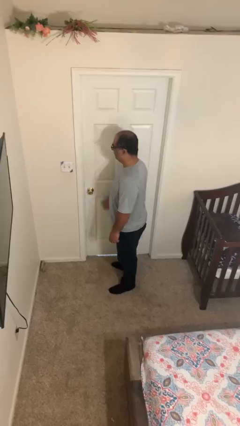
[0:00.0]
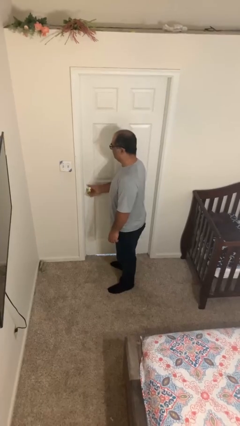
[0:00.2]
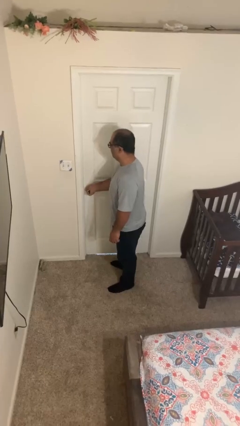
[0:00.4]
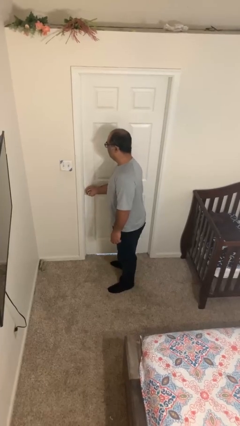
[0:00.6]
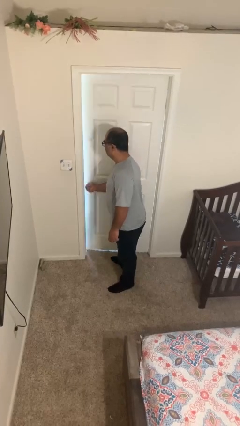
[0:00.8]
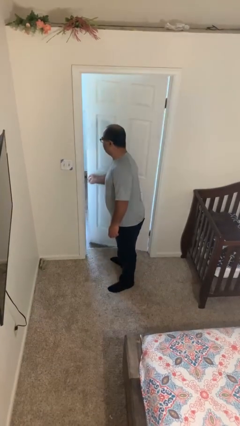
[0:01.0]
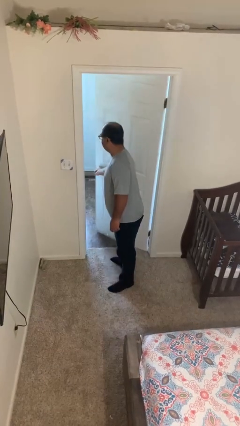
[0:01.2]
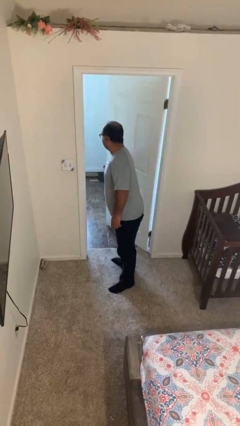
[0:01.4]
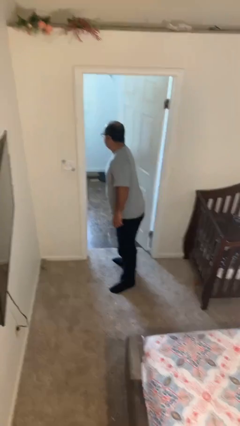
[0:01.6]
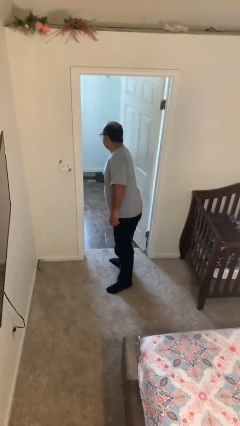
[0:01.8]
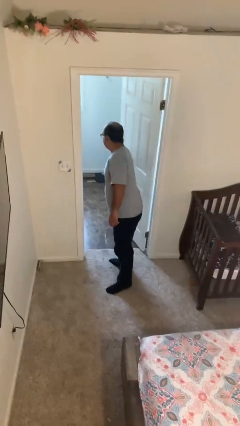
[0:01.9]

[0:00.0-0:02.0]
person opens facility door

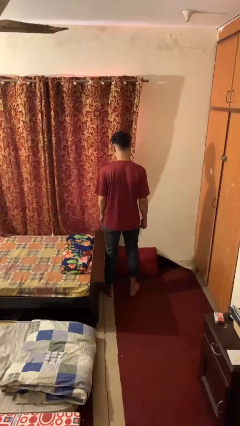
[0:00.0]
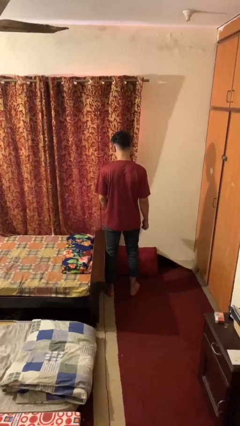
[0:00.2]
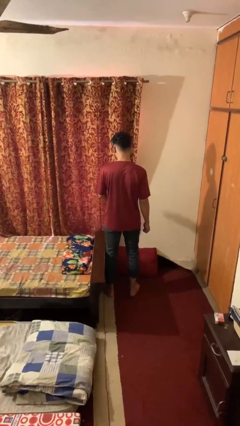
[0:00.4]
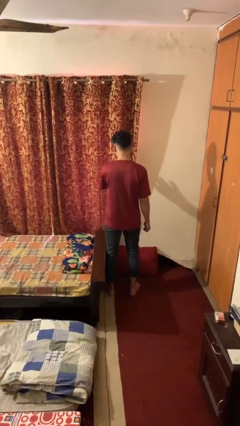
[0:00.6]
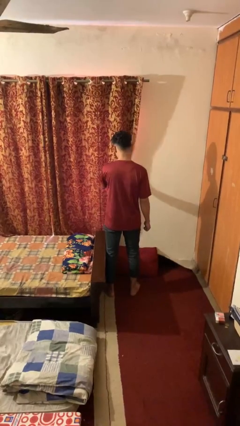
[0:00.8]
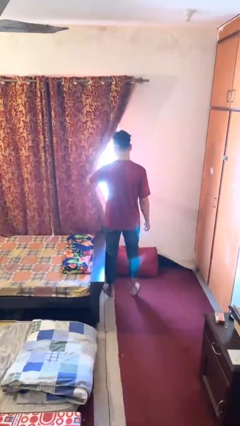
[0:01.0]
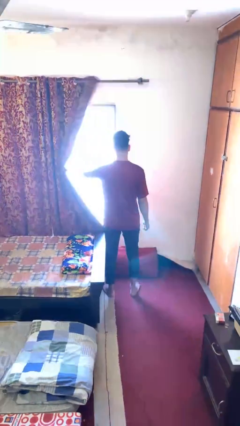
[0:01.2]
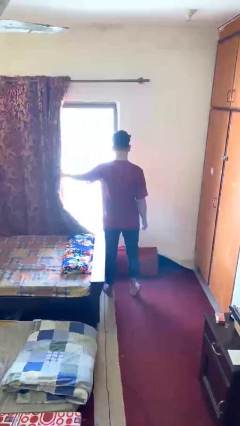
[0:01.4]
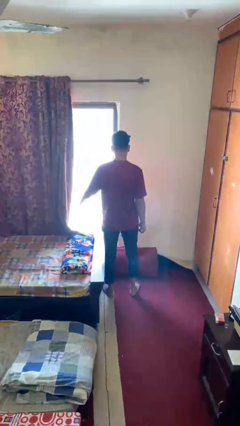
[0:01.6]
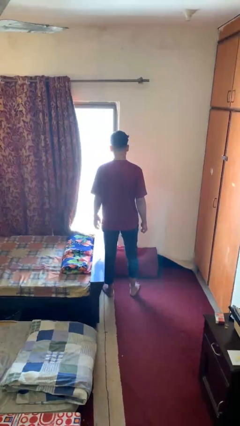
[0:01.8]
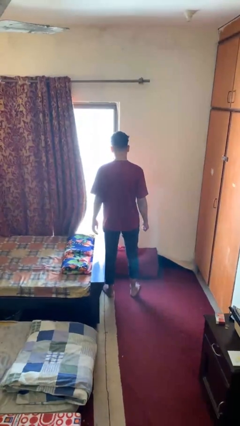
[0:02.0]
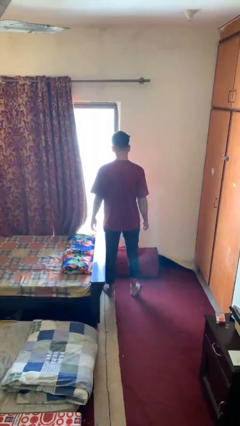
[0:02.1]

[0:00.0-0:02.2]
person opens curtains

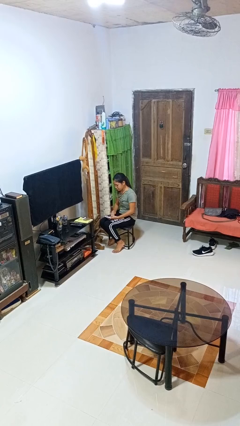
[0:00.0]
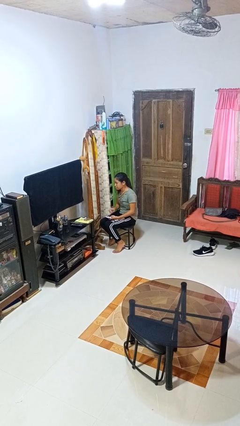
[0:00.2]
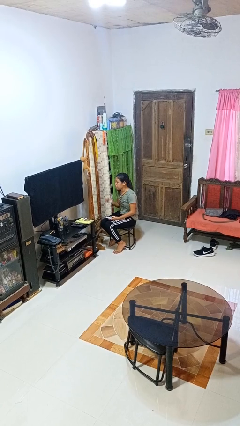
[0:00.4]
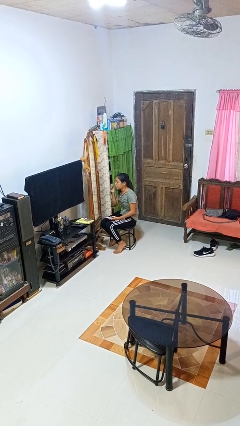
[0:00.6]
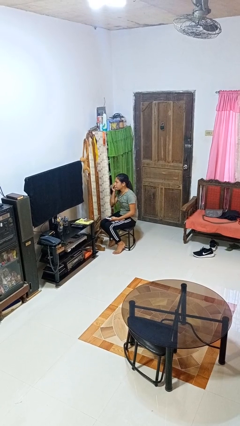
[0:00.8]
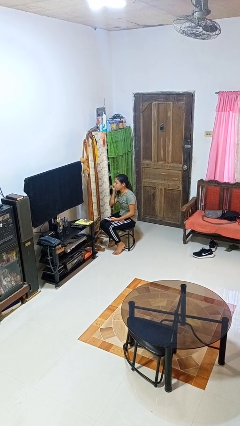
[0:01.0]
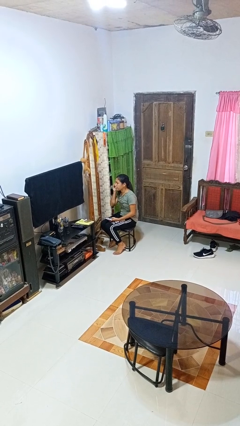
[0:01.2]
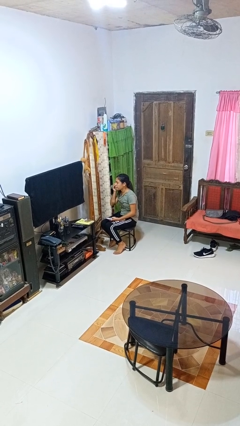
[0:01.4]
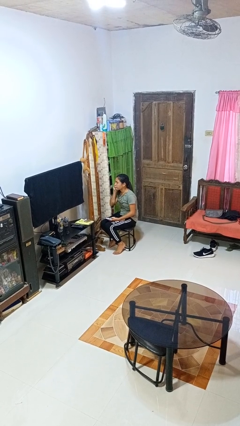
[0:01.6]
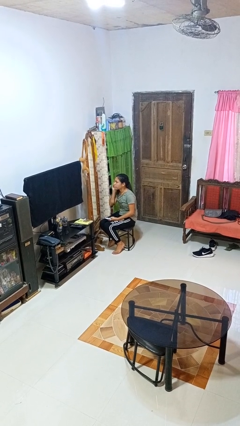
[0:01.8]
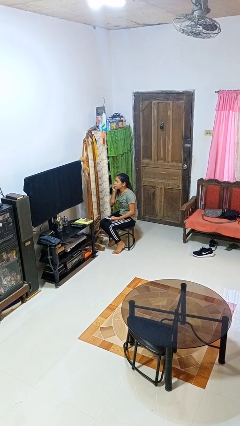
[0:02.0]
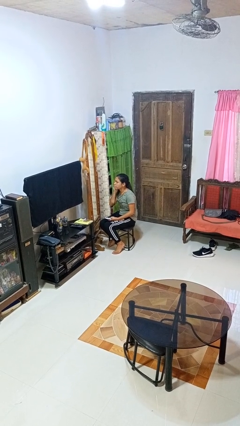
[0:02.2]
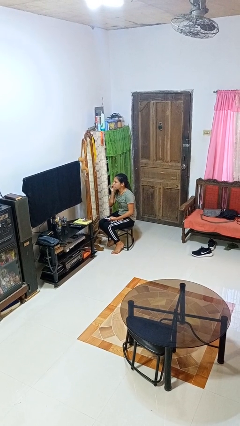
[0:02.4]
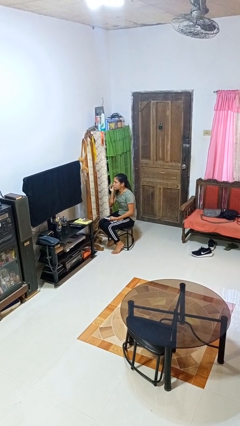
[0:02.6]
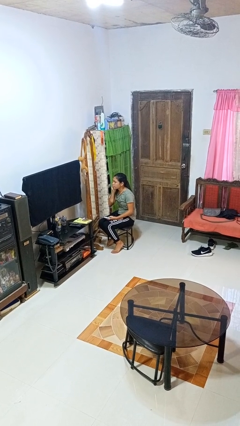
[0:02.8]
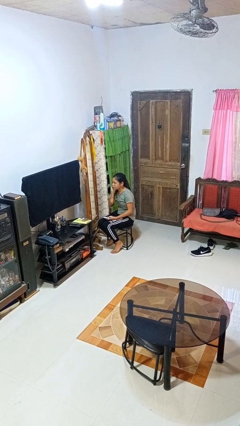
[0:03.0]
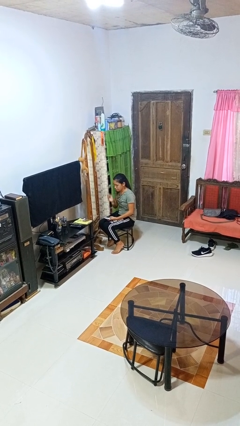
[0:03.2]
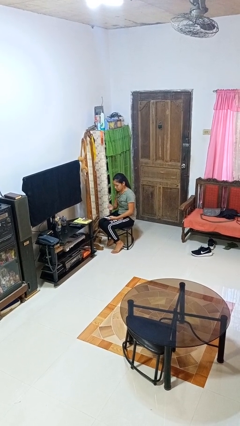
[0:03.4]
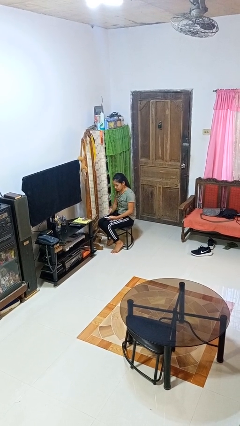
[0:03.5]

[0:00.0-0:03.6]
person applies foundation makeup

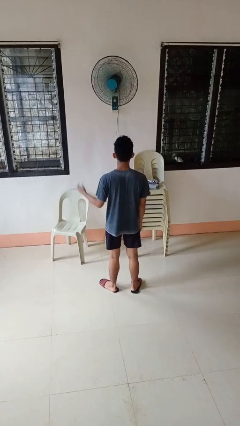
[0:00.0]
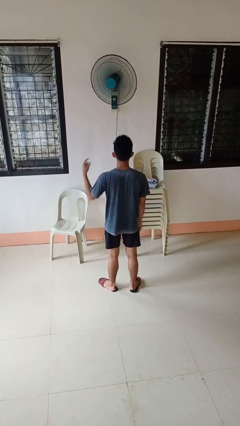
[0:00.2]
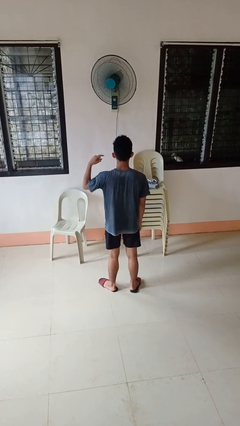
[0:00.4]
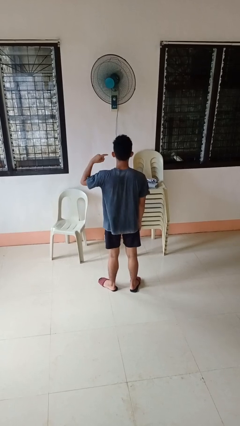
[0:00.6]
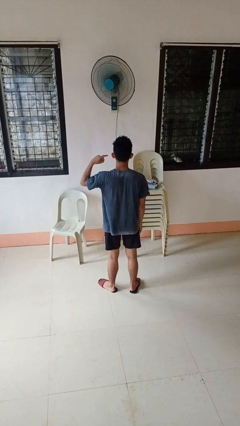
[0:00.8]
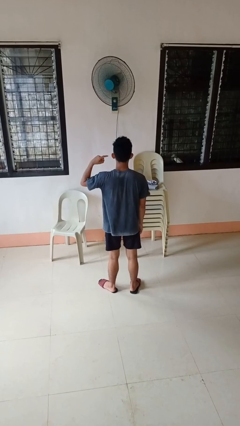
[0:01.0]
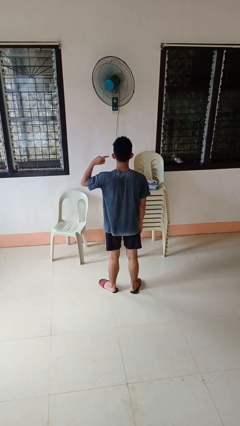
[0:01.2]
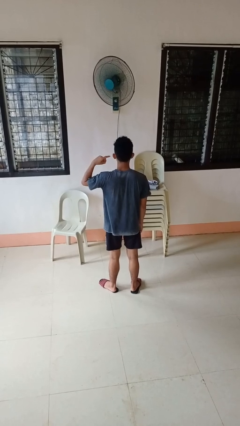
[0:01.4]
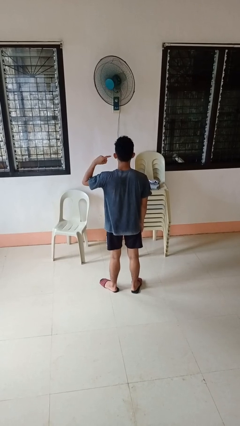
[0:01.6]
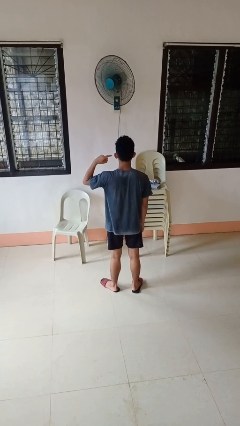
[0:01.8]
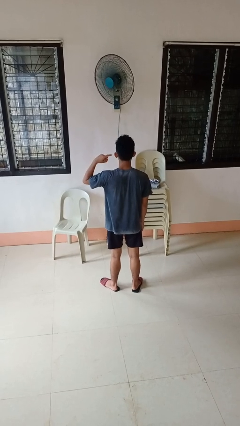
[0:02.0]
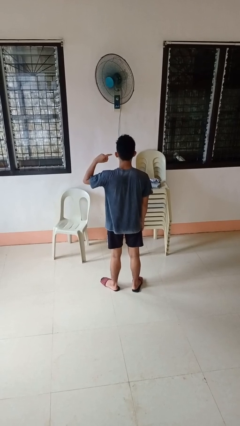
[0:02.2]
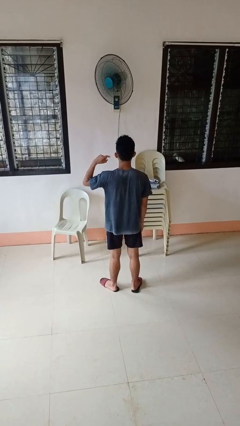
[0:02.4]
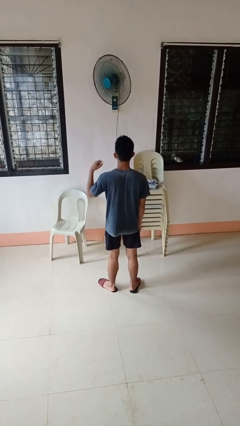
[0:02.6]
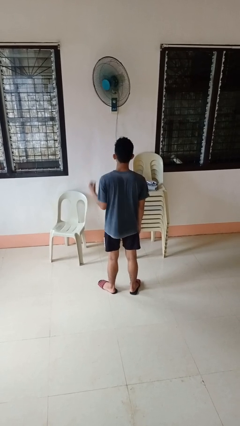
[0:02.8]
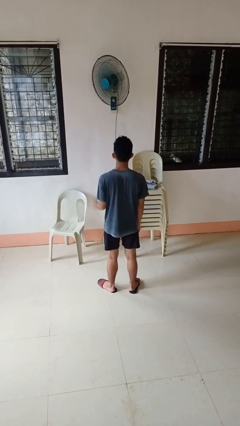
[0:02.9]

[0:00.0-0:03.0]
person gestures listen closely

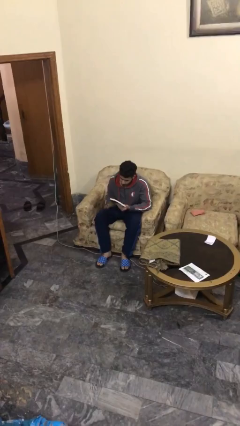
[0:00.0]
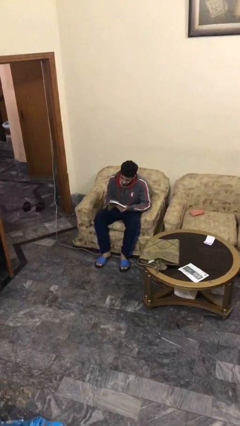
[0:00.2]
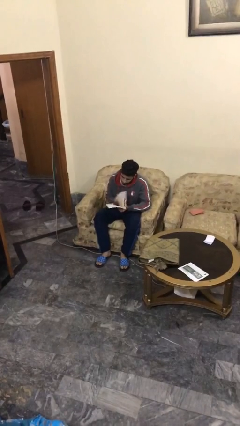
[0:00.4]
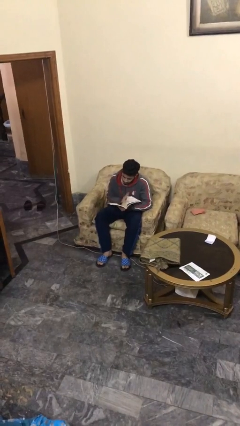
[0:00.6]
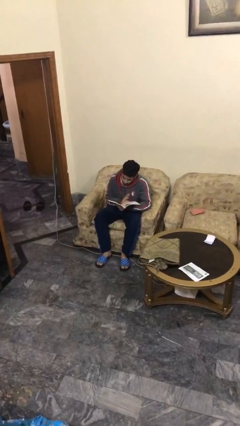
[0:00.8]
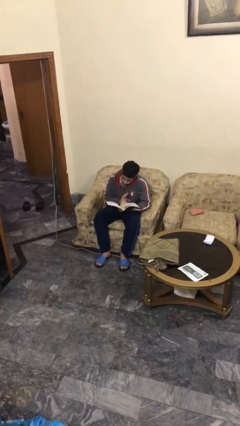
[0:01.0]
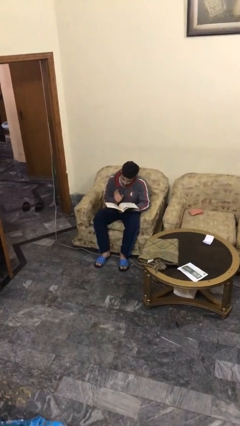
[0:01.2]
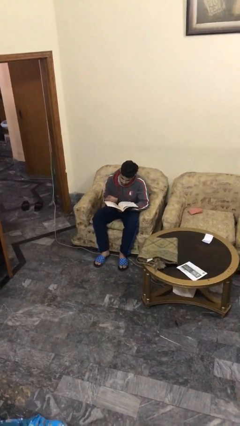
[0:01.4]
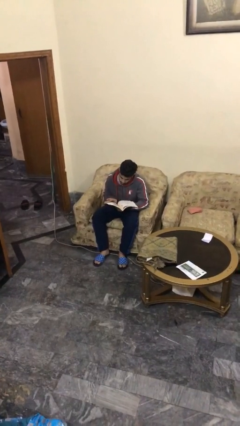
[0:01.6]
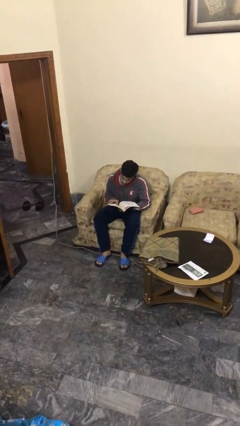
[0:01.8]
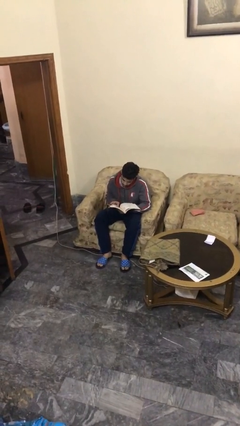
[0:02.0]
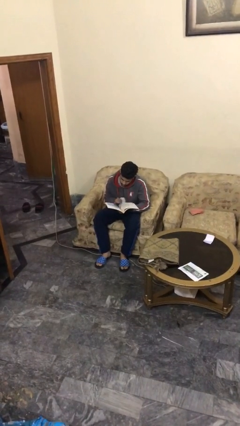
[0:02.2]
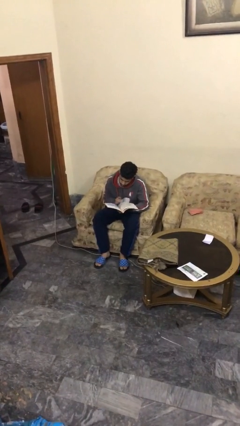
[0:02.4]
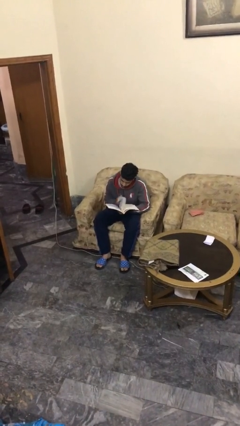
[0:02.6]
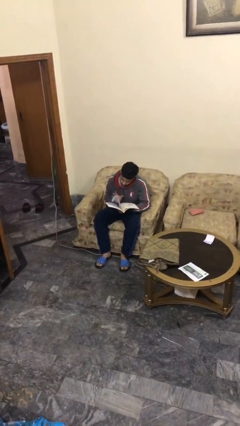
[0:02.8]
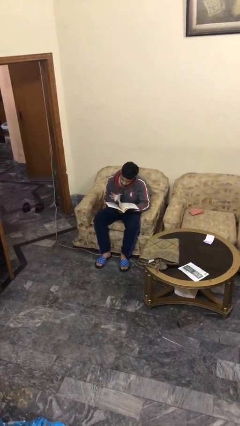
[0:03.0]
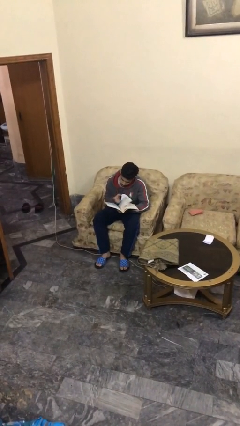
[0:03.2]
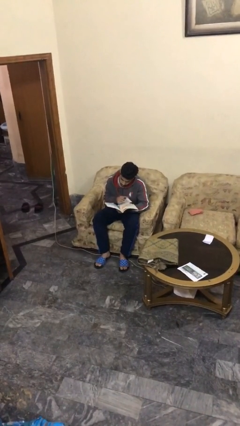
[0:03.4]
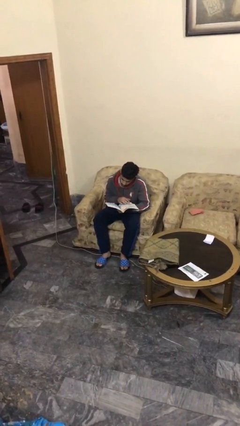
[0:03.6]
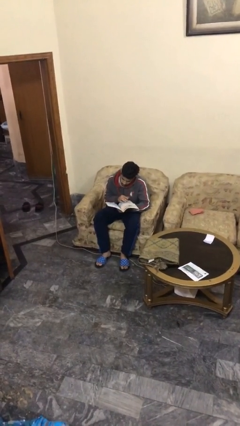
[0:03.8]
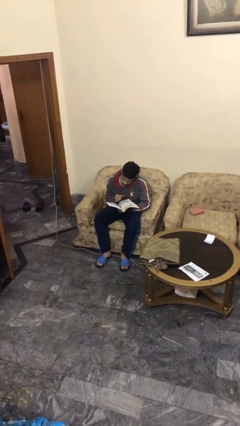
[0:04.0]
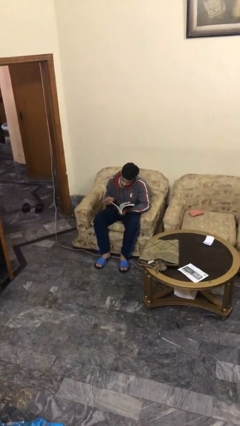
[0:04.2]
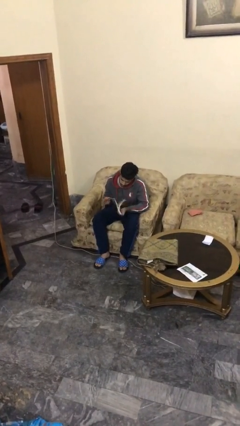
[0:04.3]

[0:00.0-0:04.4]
person reads document

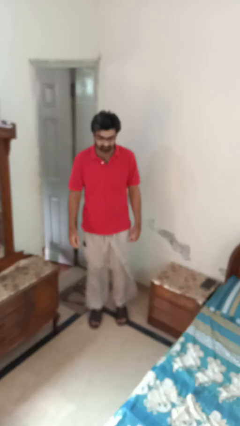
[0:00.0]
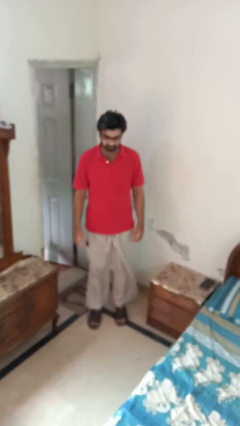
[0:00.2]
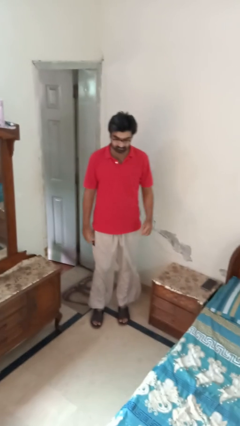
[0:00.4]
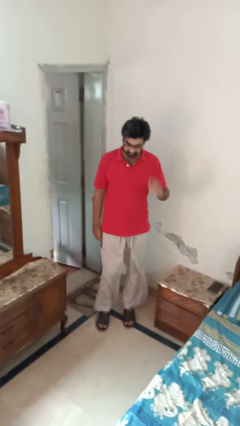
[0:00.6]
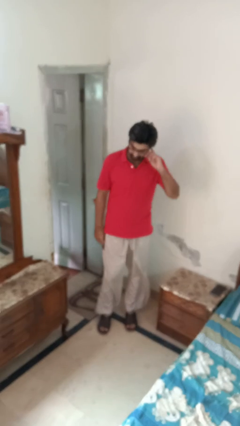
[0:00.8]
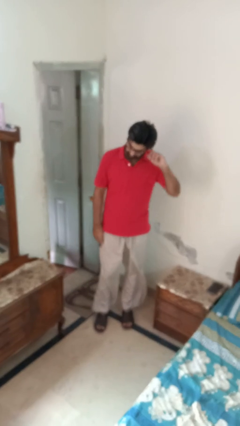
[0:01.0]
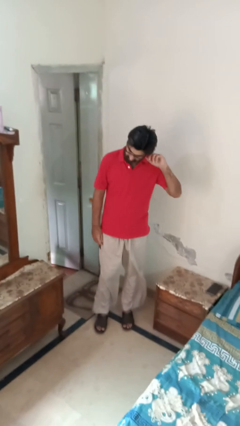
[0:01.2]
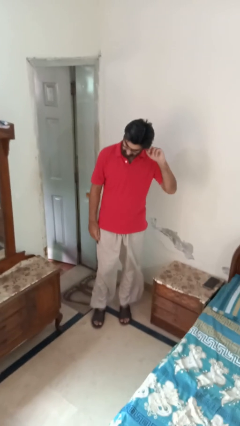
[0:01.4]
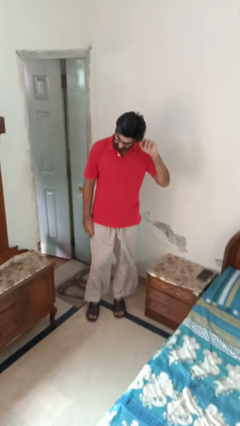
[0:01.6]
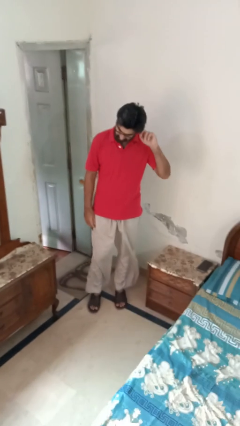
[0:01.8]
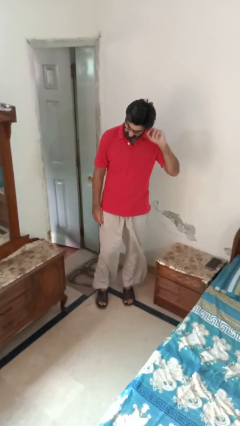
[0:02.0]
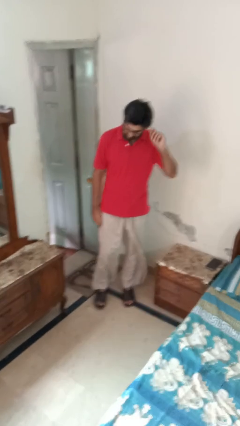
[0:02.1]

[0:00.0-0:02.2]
person touches earlobe

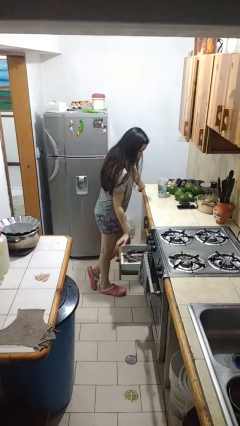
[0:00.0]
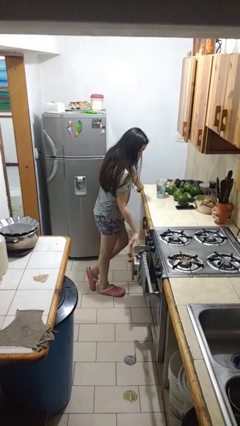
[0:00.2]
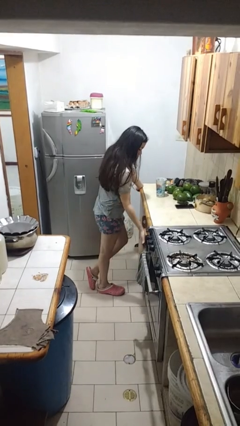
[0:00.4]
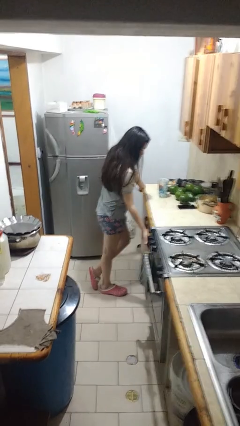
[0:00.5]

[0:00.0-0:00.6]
person closes kitchen drawer
